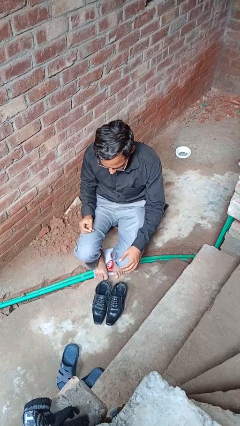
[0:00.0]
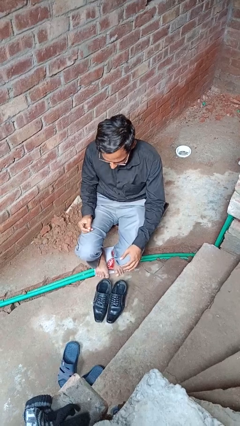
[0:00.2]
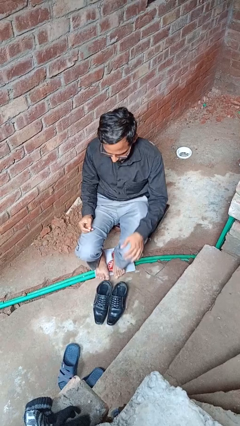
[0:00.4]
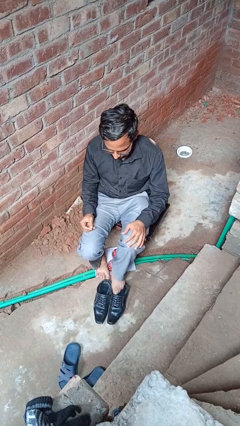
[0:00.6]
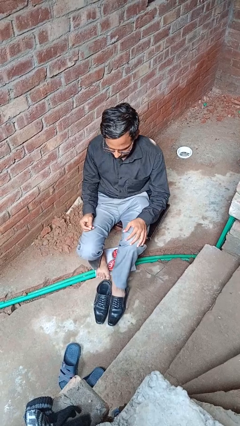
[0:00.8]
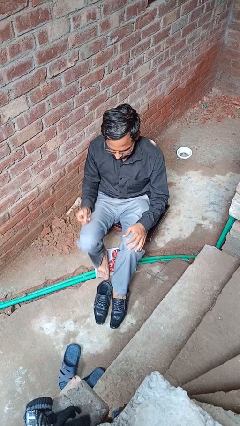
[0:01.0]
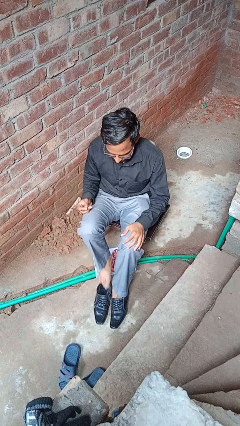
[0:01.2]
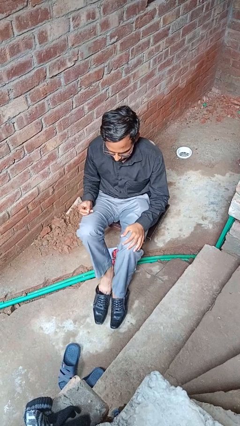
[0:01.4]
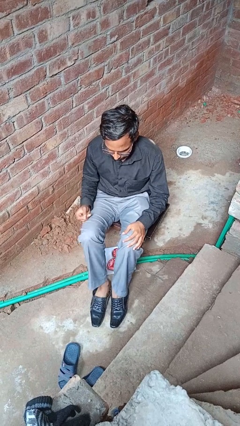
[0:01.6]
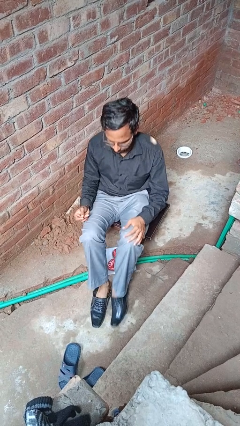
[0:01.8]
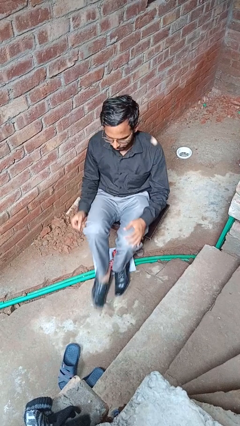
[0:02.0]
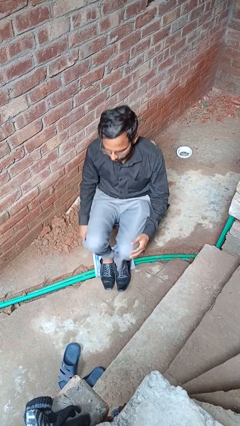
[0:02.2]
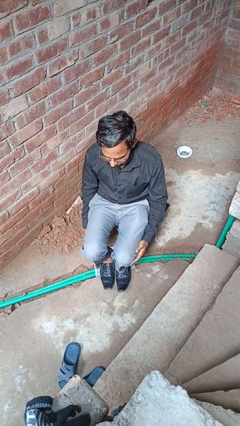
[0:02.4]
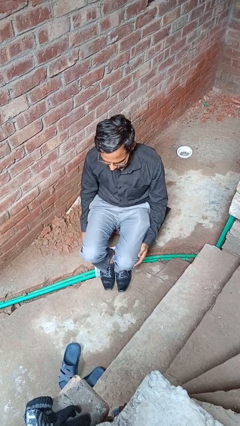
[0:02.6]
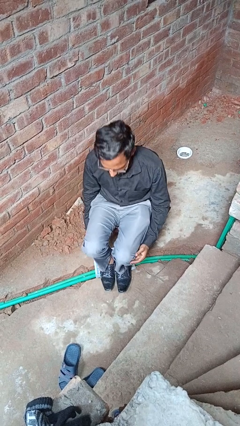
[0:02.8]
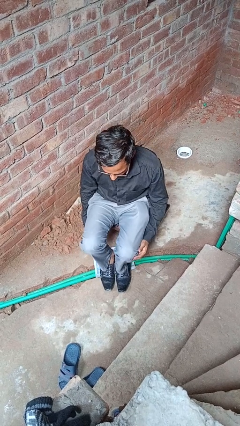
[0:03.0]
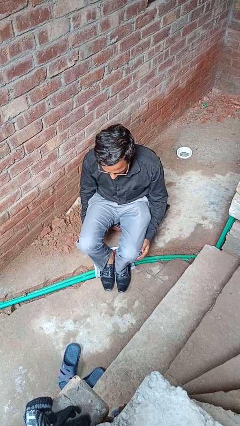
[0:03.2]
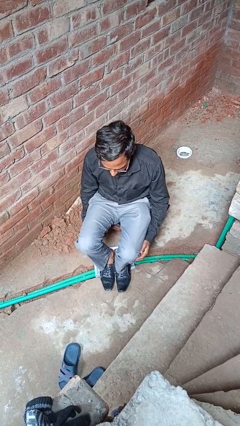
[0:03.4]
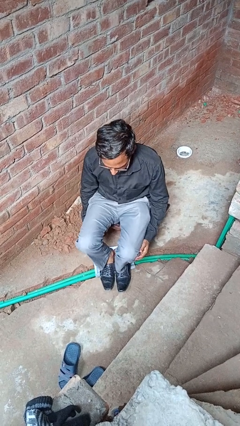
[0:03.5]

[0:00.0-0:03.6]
person puts on shoes

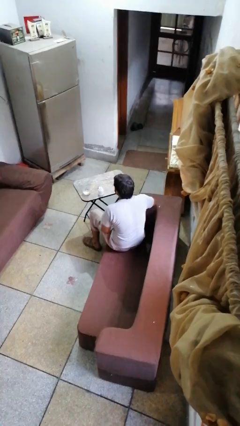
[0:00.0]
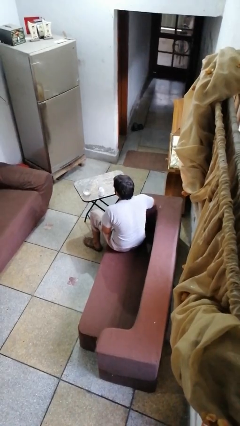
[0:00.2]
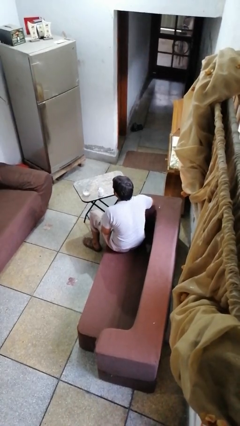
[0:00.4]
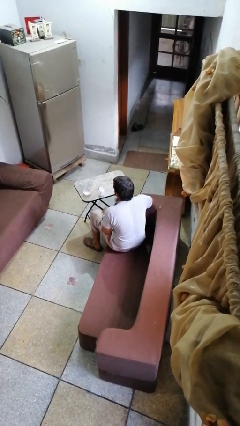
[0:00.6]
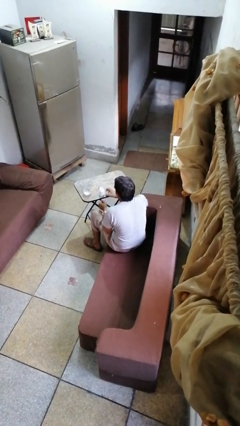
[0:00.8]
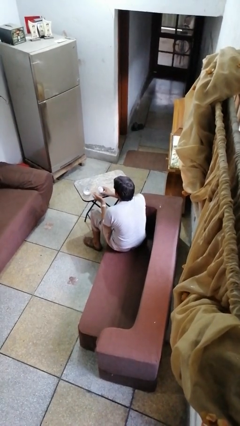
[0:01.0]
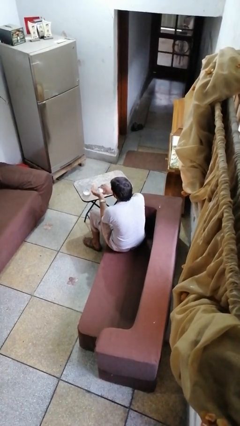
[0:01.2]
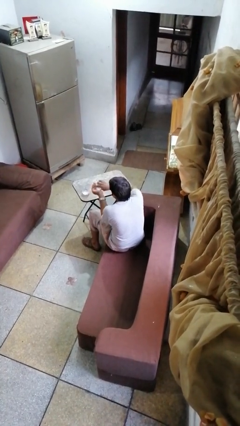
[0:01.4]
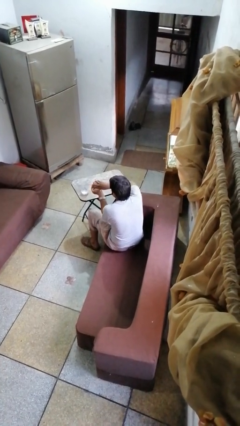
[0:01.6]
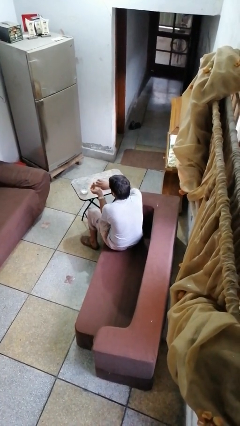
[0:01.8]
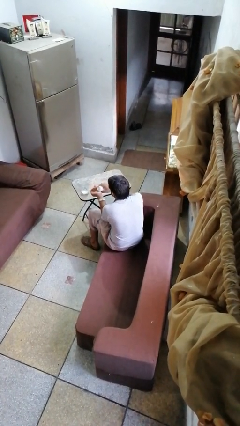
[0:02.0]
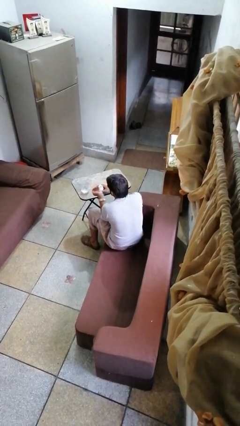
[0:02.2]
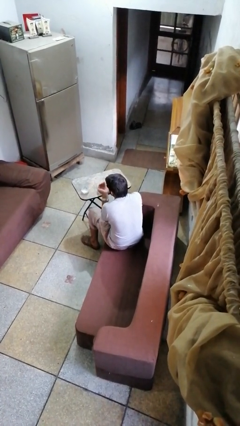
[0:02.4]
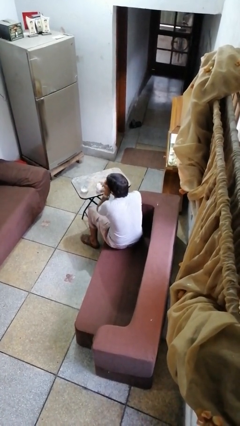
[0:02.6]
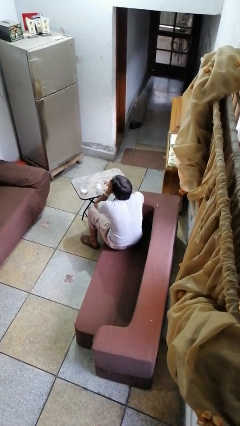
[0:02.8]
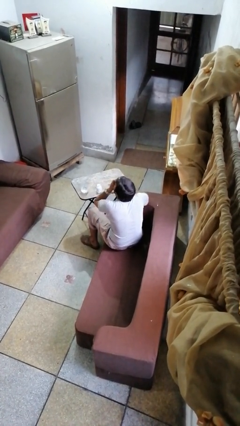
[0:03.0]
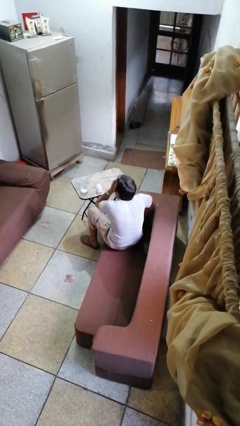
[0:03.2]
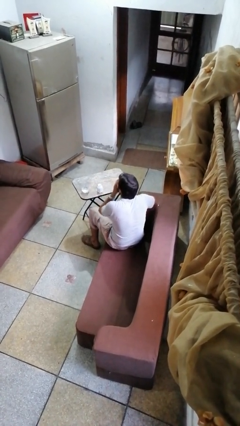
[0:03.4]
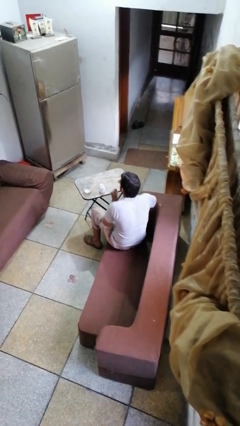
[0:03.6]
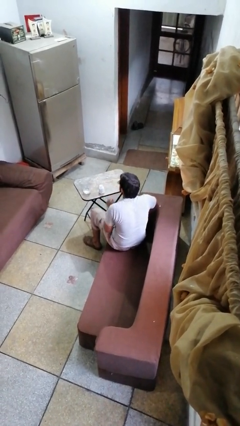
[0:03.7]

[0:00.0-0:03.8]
person takes medicine pills

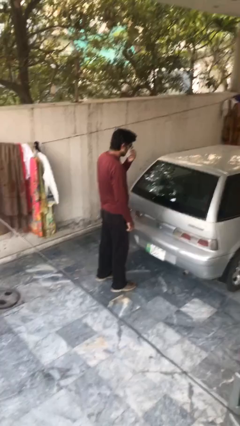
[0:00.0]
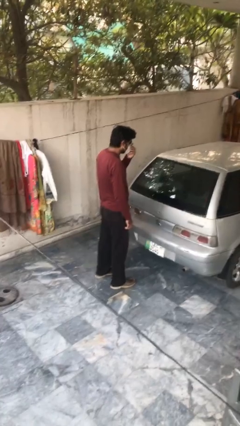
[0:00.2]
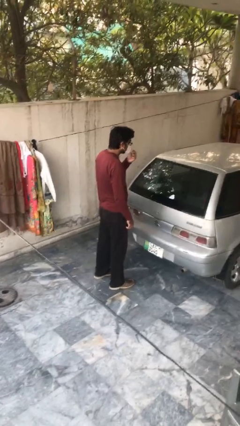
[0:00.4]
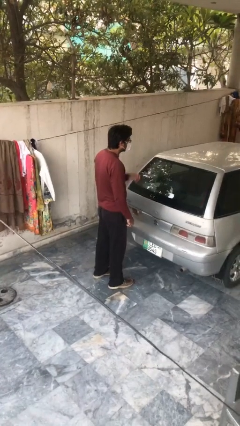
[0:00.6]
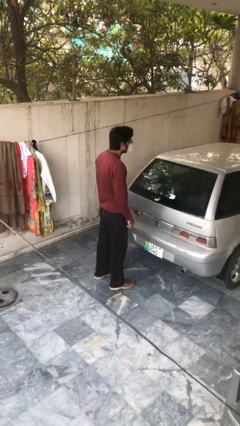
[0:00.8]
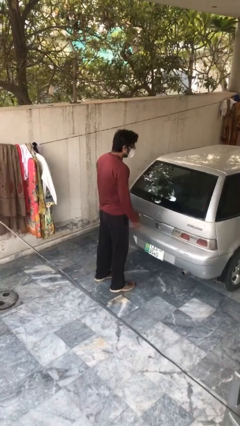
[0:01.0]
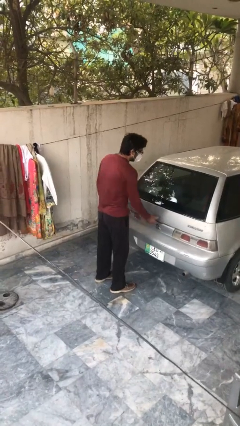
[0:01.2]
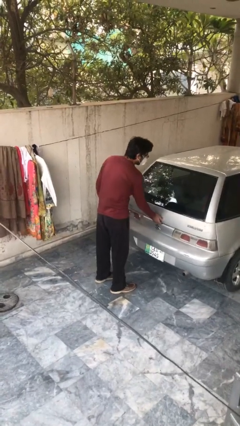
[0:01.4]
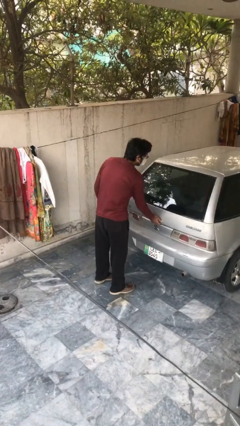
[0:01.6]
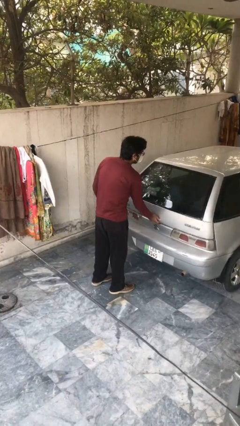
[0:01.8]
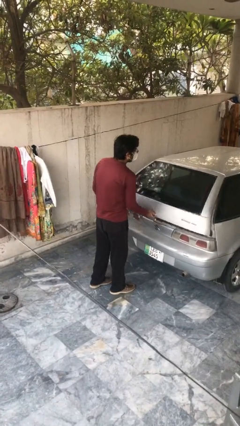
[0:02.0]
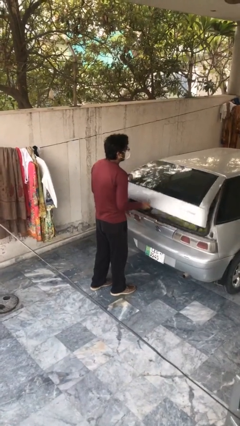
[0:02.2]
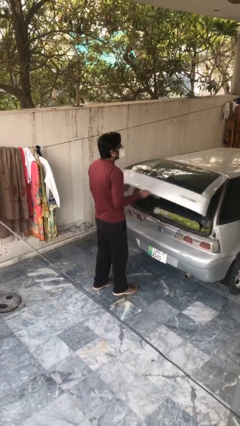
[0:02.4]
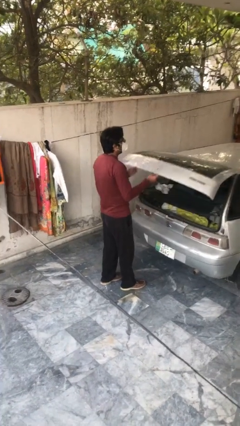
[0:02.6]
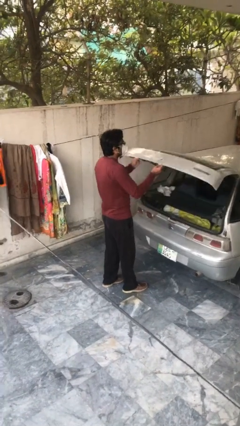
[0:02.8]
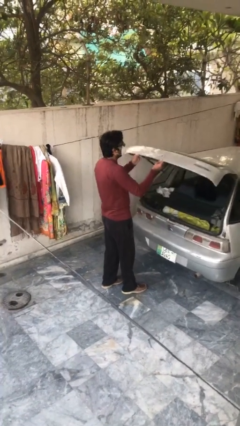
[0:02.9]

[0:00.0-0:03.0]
person opens car trunk

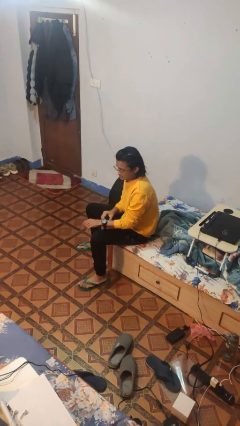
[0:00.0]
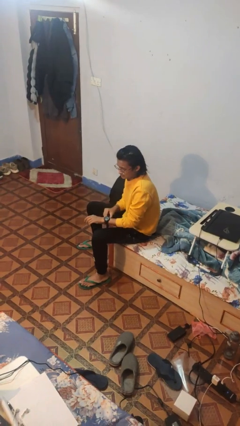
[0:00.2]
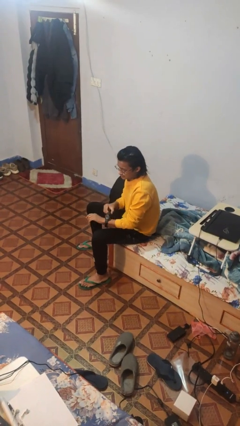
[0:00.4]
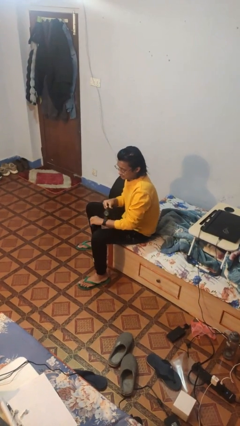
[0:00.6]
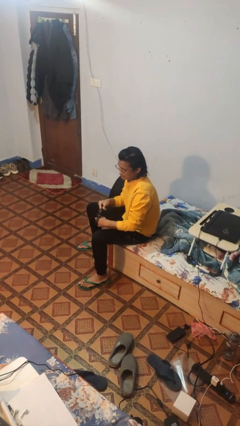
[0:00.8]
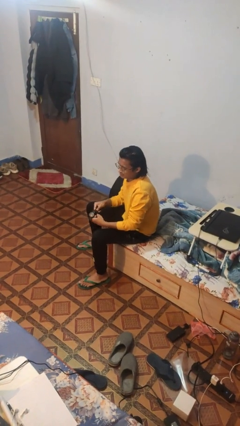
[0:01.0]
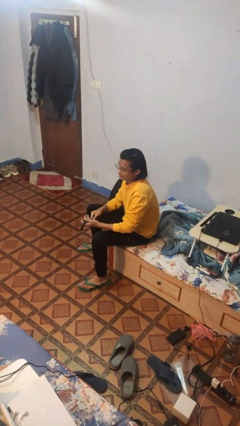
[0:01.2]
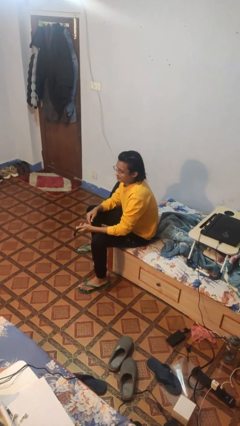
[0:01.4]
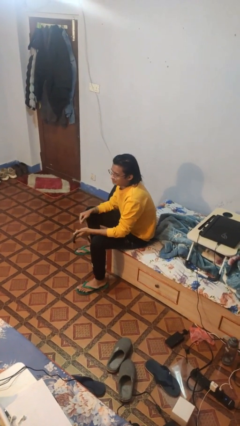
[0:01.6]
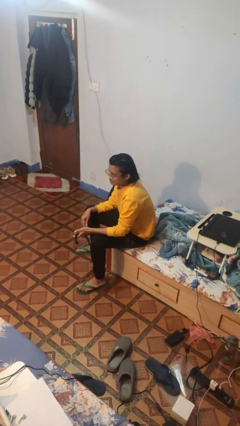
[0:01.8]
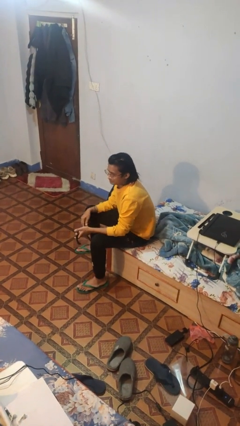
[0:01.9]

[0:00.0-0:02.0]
person takes off wristwatch

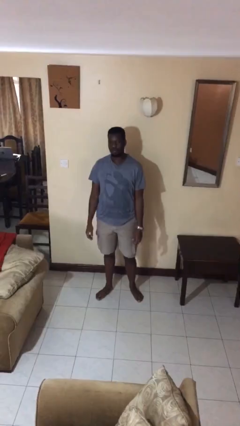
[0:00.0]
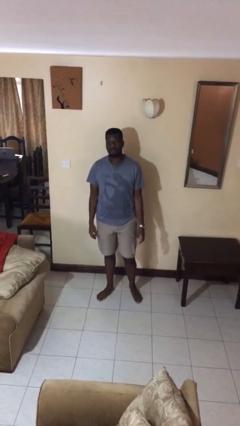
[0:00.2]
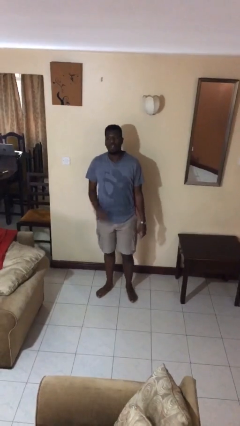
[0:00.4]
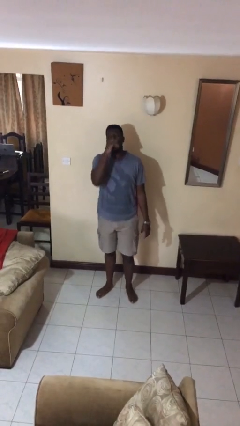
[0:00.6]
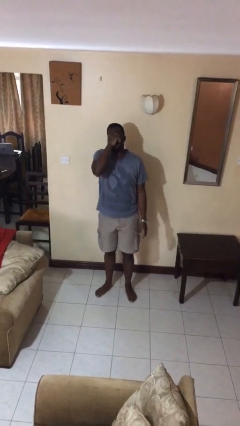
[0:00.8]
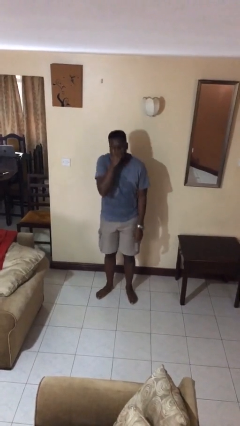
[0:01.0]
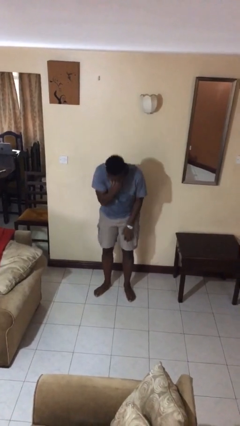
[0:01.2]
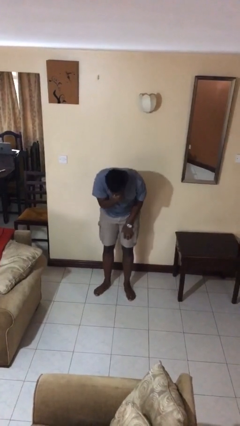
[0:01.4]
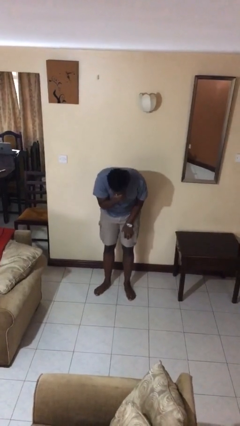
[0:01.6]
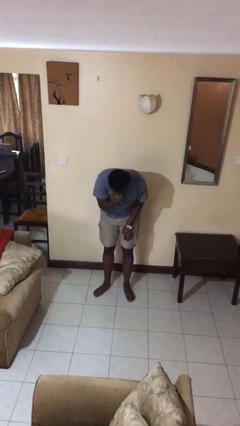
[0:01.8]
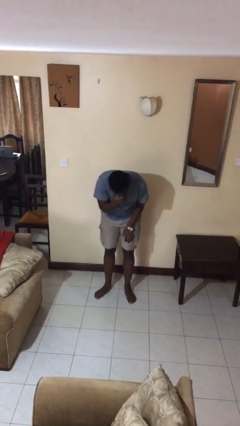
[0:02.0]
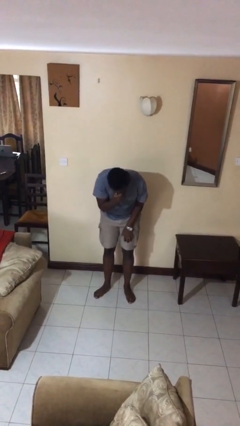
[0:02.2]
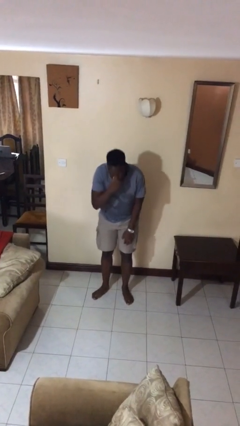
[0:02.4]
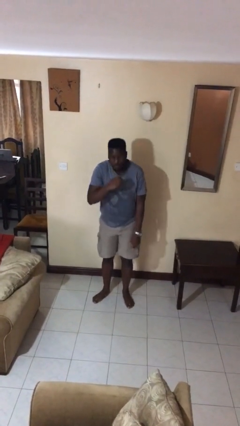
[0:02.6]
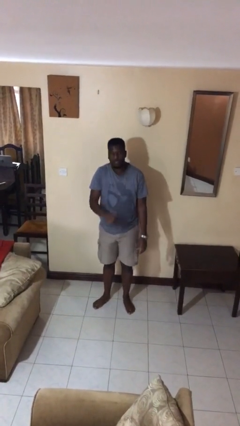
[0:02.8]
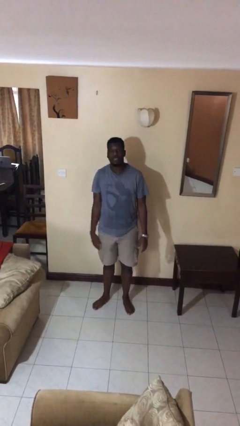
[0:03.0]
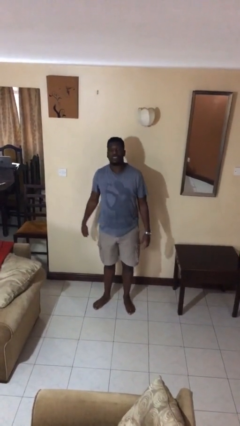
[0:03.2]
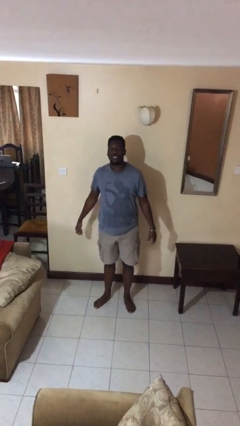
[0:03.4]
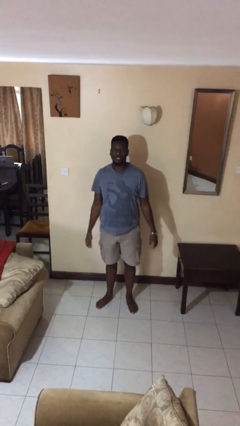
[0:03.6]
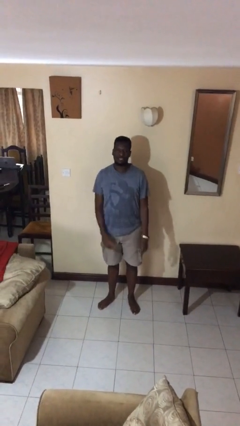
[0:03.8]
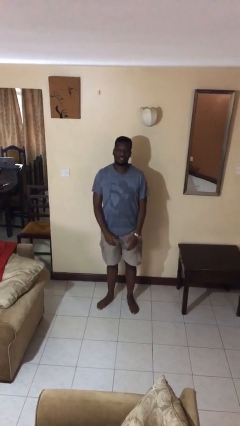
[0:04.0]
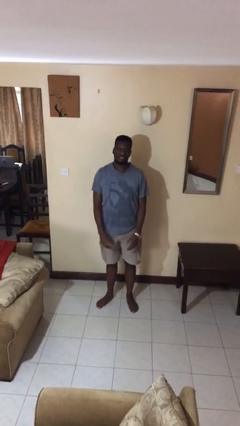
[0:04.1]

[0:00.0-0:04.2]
person sneezes into hand

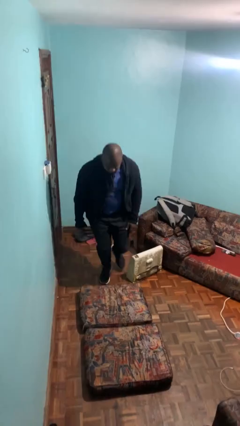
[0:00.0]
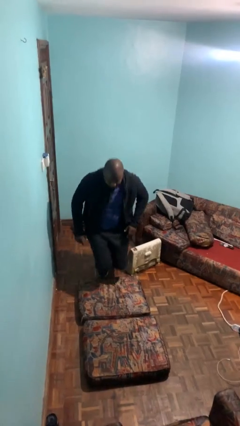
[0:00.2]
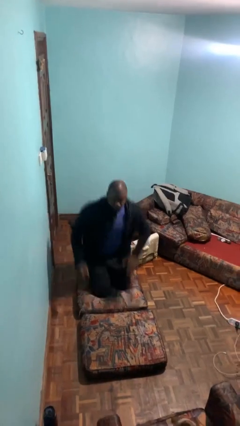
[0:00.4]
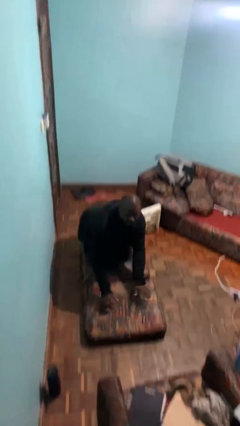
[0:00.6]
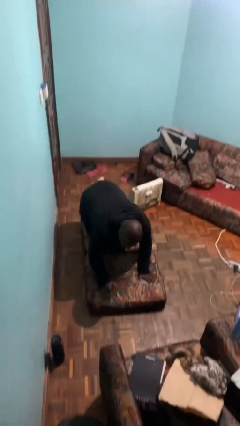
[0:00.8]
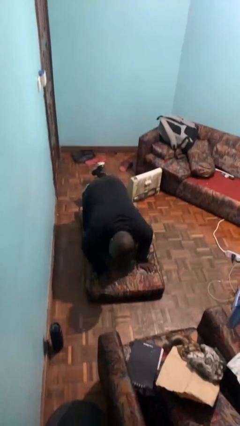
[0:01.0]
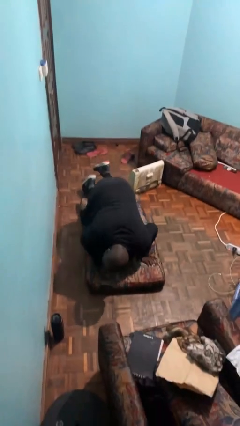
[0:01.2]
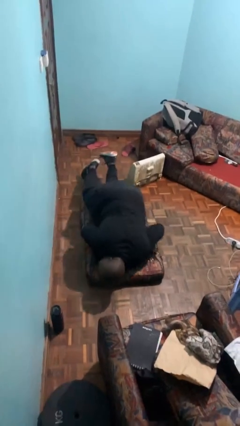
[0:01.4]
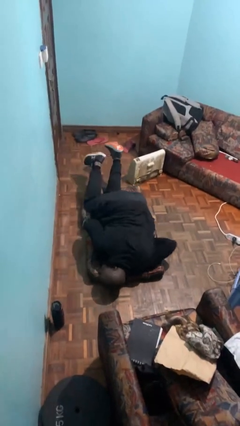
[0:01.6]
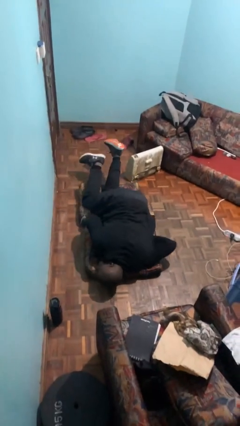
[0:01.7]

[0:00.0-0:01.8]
person trips on object on floor
